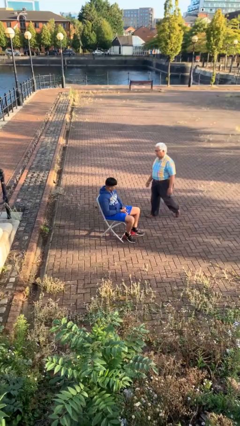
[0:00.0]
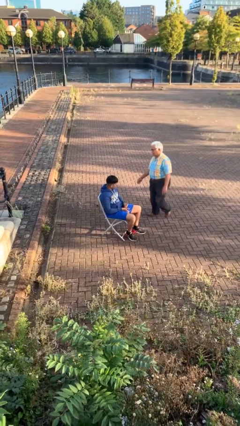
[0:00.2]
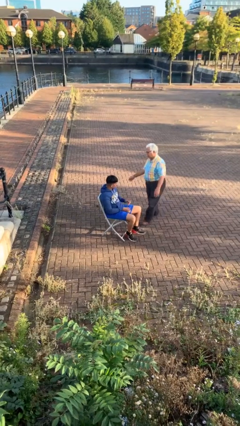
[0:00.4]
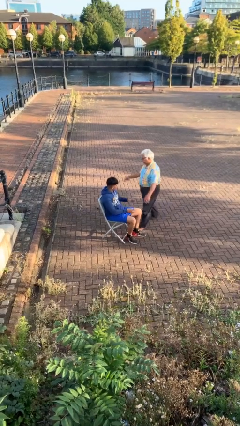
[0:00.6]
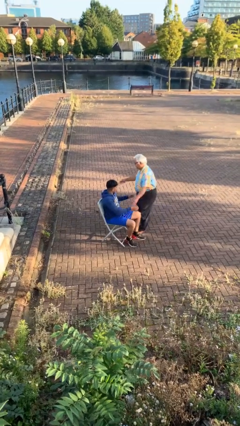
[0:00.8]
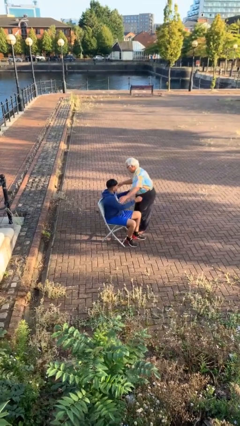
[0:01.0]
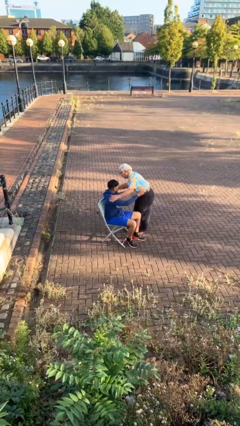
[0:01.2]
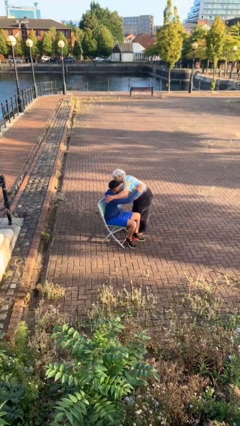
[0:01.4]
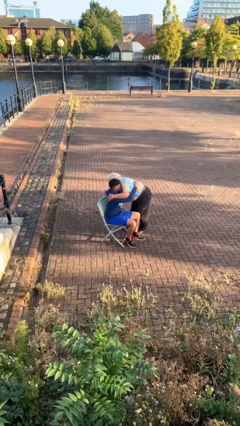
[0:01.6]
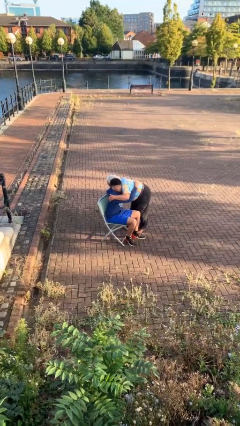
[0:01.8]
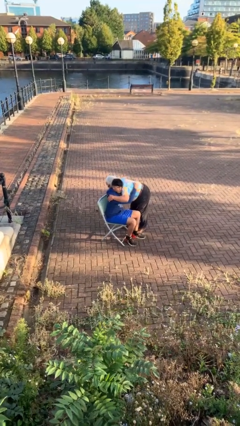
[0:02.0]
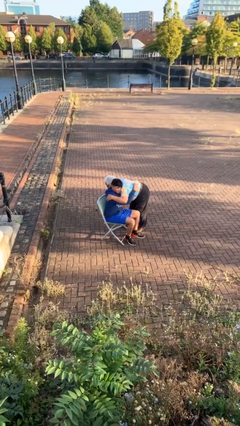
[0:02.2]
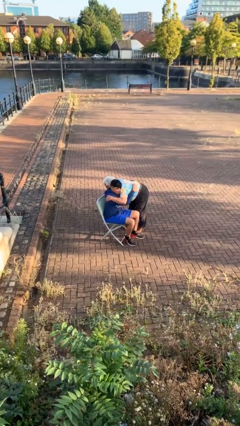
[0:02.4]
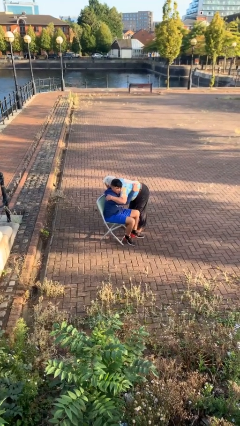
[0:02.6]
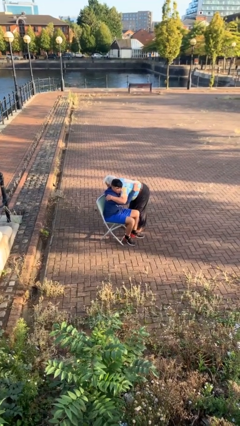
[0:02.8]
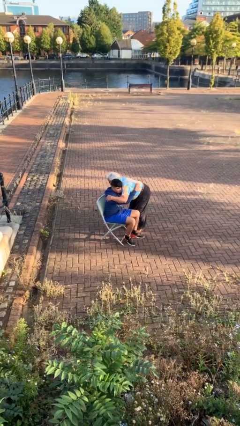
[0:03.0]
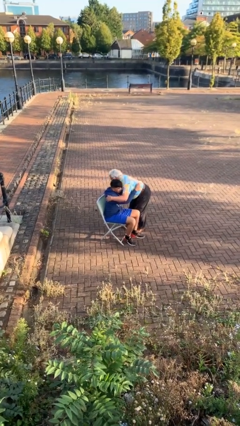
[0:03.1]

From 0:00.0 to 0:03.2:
person embraces person

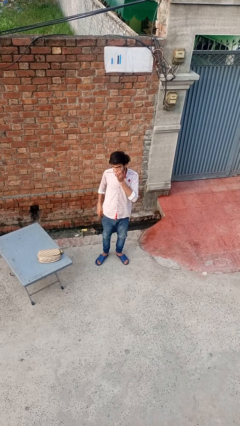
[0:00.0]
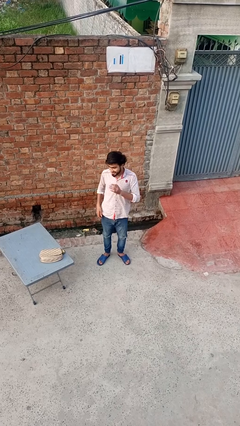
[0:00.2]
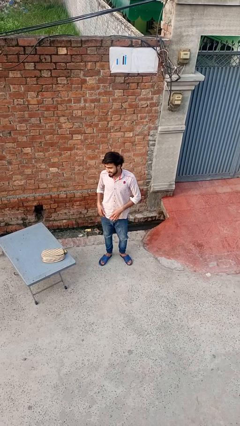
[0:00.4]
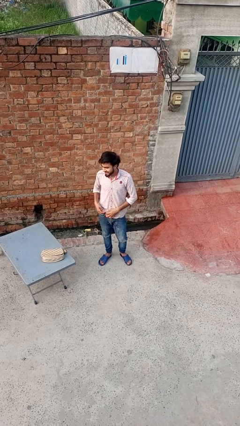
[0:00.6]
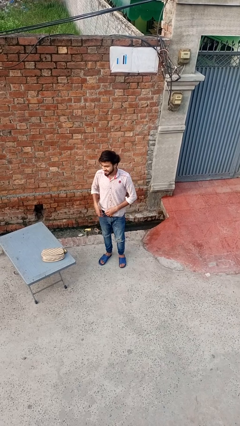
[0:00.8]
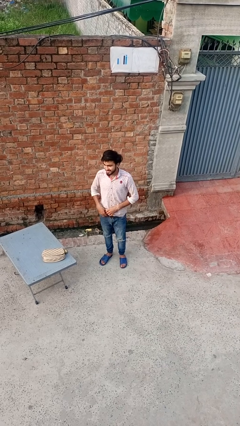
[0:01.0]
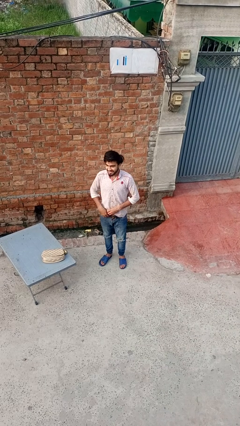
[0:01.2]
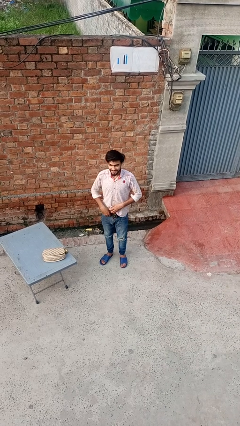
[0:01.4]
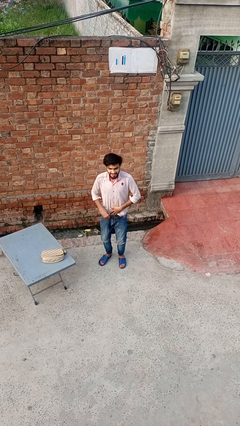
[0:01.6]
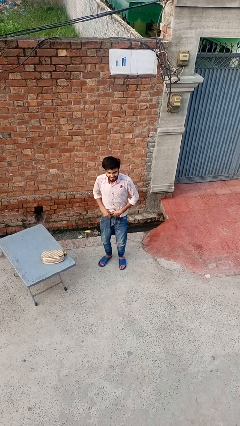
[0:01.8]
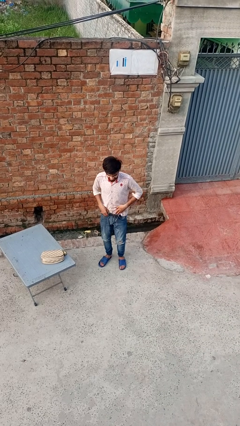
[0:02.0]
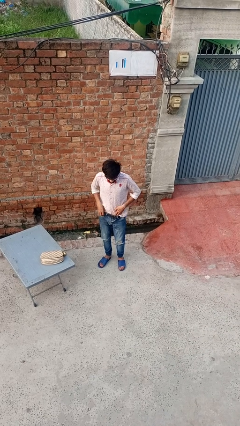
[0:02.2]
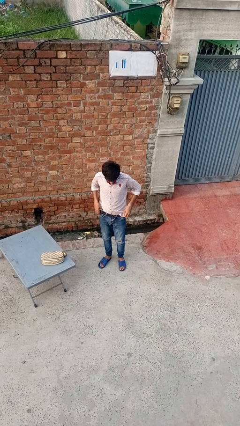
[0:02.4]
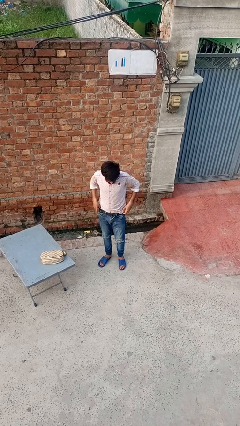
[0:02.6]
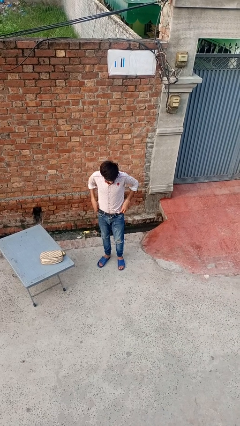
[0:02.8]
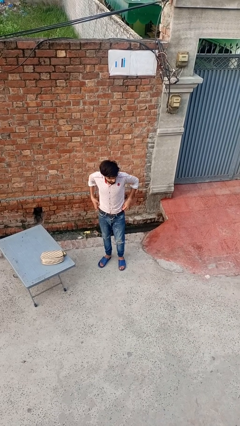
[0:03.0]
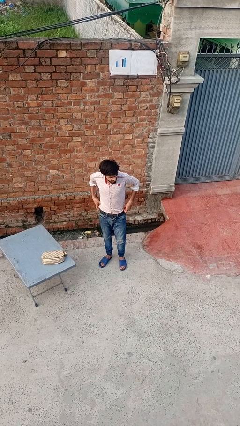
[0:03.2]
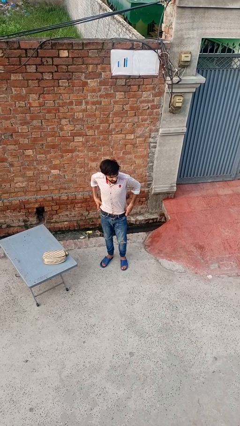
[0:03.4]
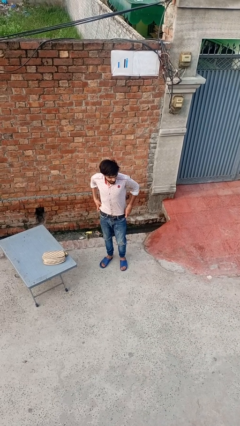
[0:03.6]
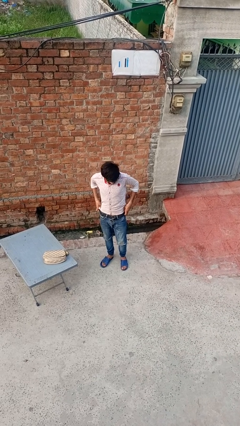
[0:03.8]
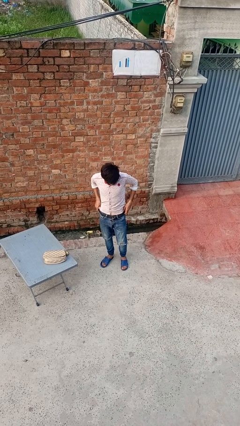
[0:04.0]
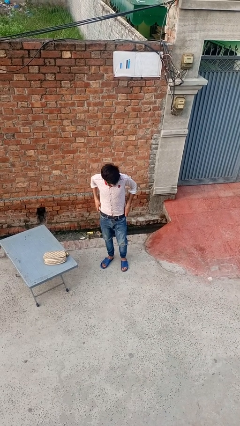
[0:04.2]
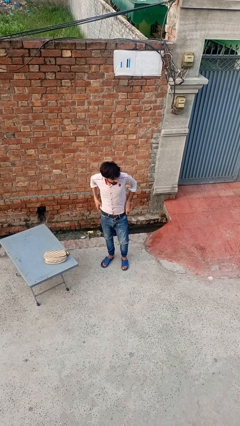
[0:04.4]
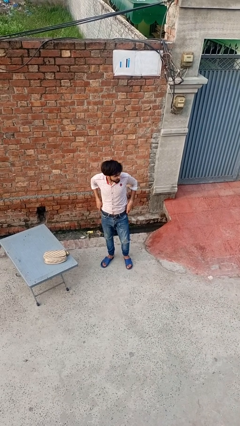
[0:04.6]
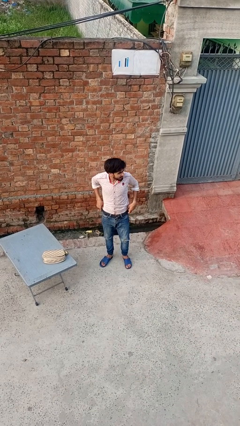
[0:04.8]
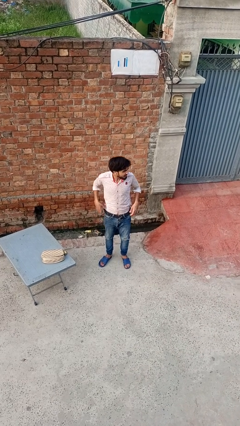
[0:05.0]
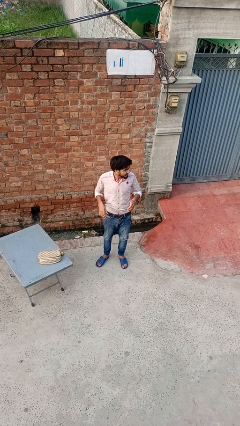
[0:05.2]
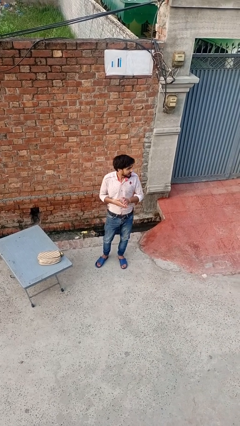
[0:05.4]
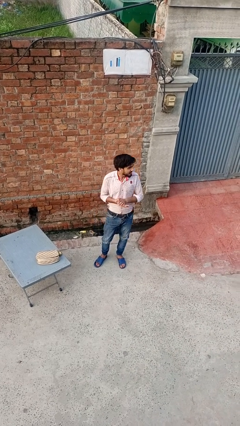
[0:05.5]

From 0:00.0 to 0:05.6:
person tucks in shirt

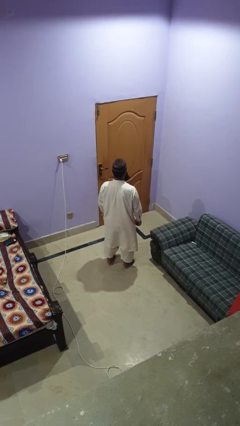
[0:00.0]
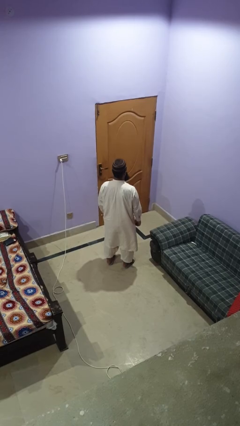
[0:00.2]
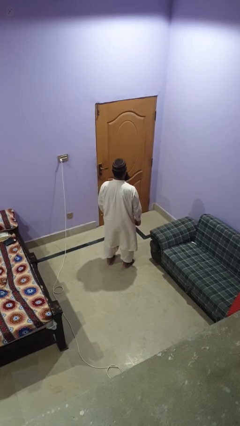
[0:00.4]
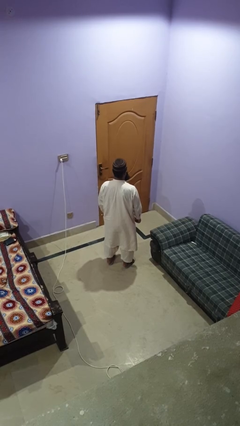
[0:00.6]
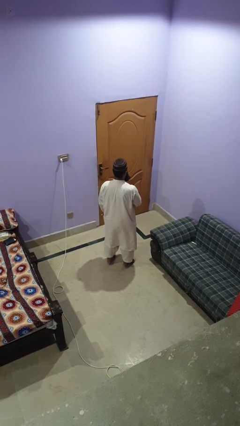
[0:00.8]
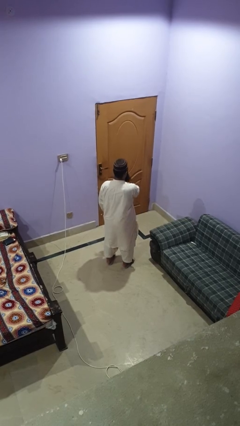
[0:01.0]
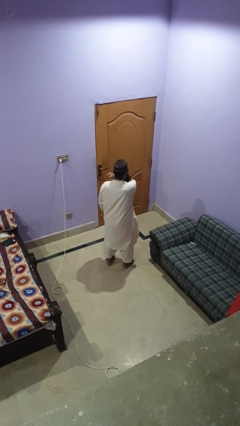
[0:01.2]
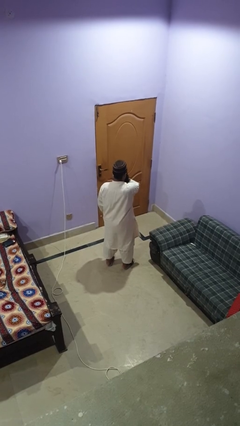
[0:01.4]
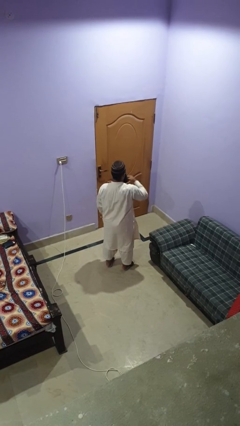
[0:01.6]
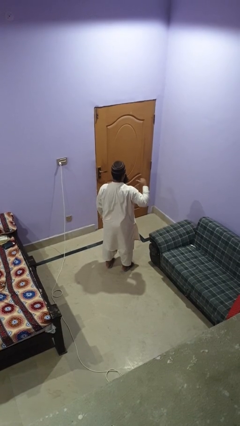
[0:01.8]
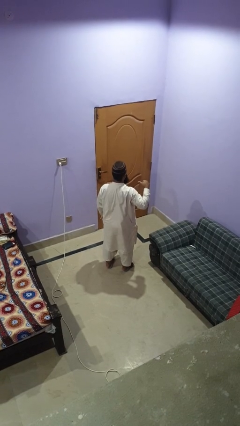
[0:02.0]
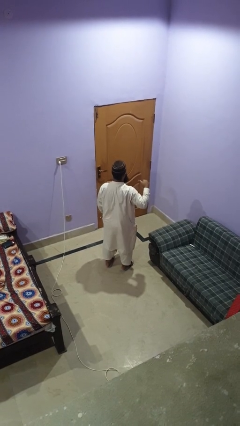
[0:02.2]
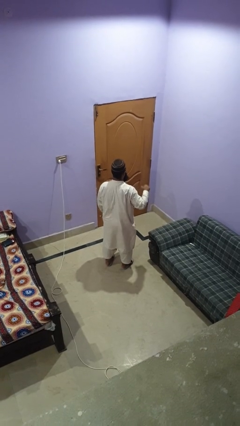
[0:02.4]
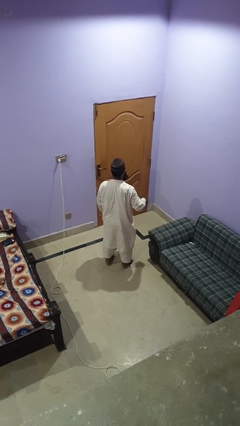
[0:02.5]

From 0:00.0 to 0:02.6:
person gestures cut

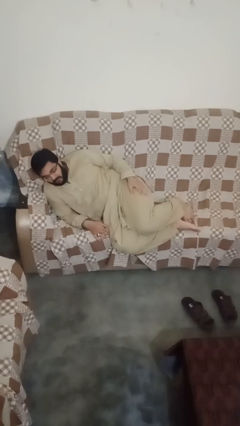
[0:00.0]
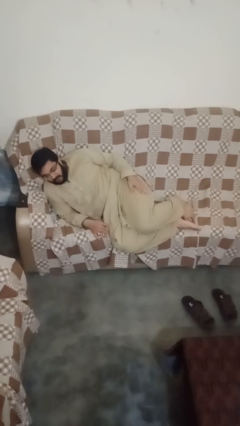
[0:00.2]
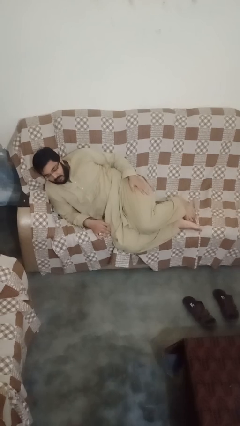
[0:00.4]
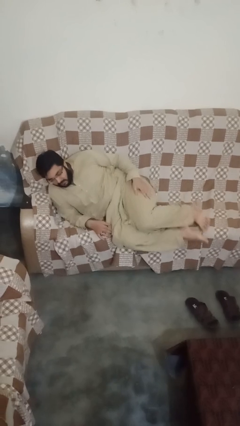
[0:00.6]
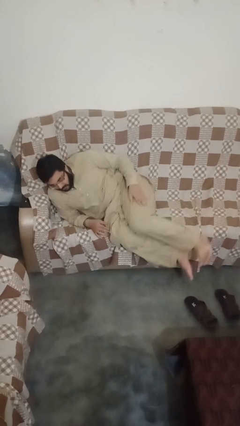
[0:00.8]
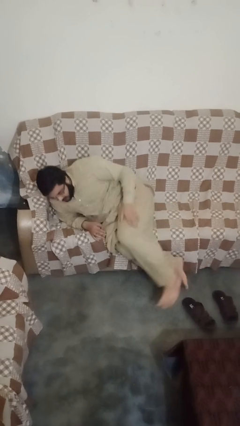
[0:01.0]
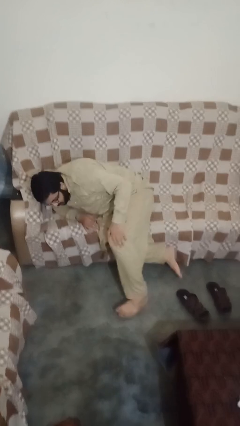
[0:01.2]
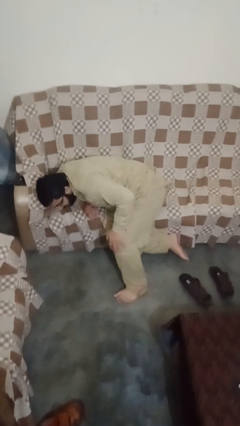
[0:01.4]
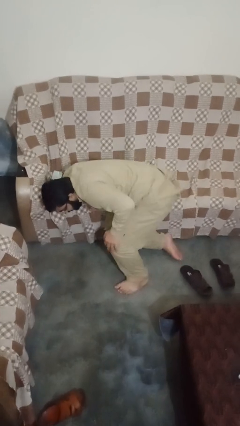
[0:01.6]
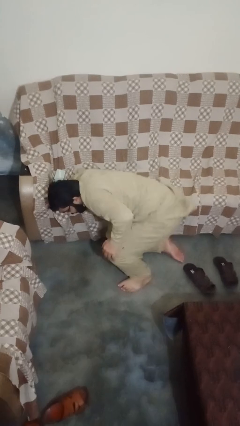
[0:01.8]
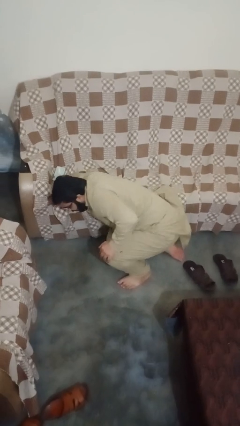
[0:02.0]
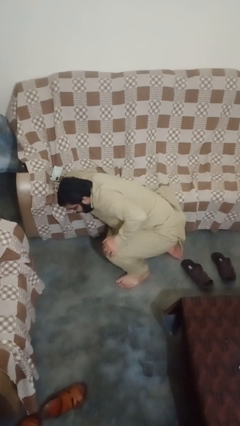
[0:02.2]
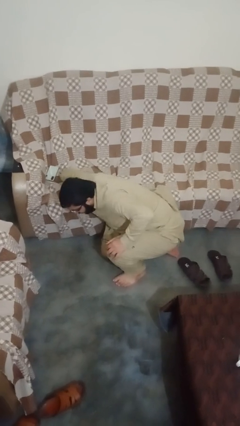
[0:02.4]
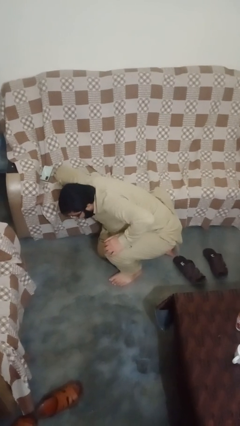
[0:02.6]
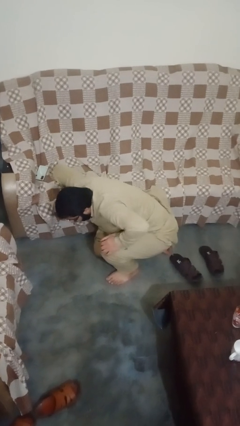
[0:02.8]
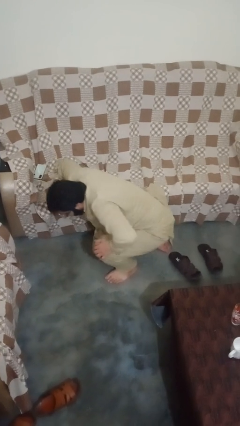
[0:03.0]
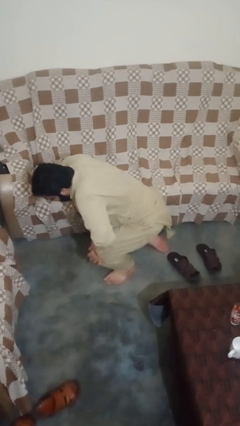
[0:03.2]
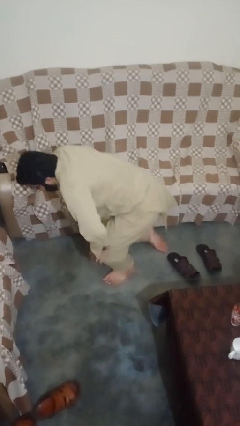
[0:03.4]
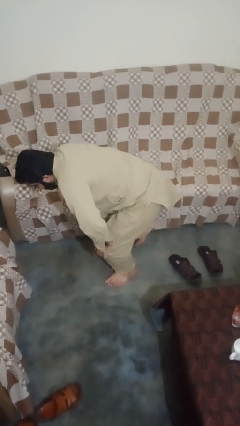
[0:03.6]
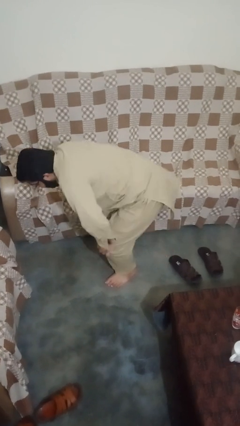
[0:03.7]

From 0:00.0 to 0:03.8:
person falls from bed

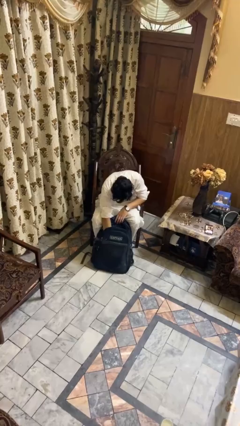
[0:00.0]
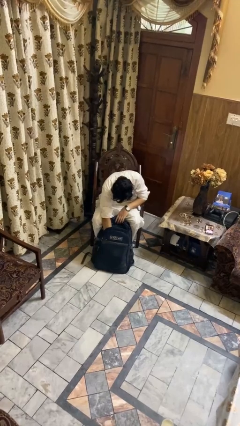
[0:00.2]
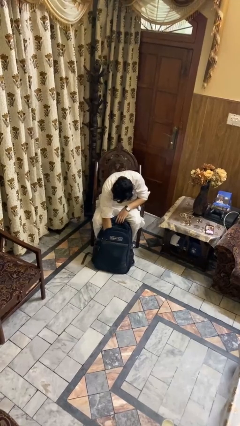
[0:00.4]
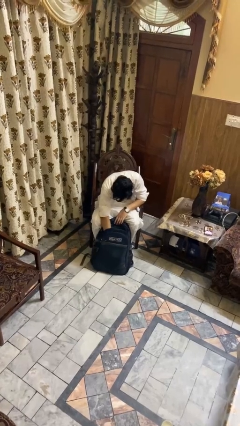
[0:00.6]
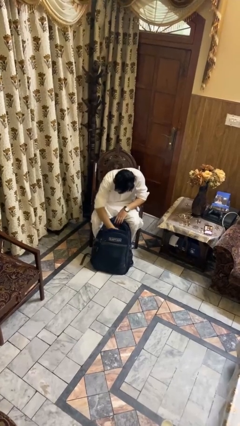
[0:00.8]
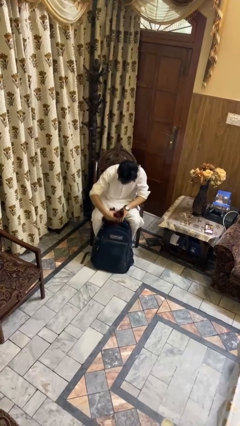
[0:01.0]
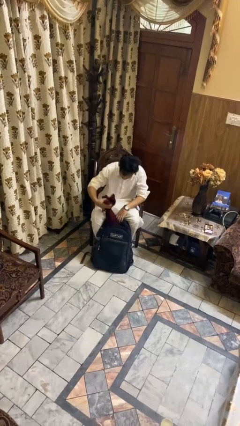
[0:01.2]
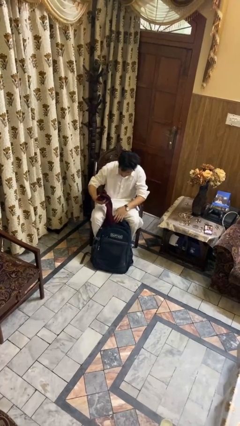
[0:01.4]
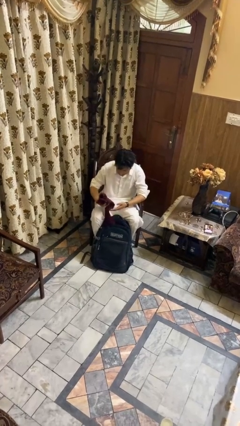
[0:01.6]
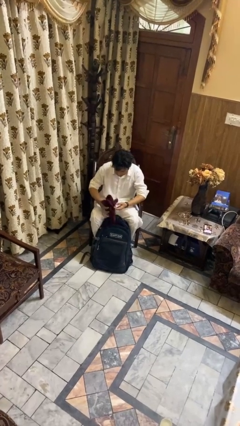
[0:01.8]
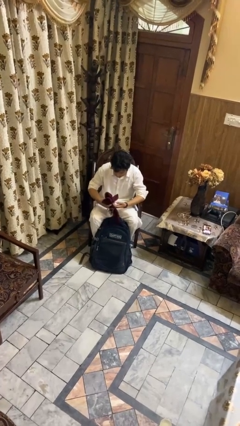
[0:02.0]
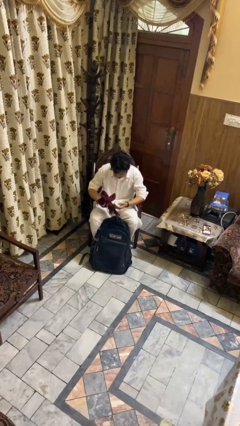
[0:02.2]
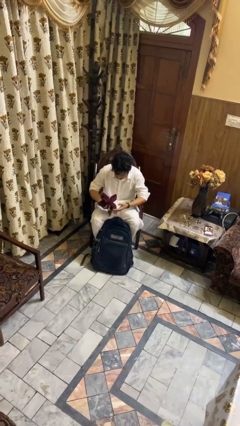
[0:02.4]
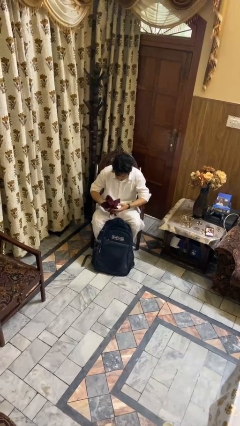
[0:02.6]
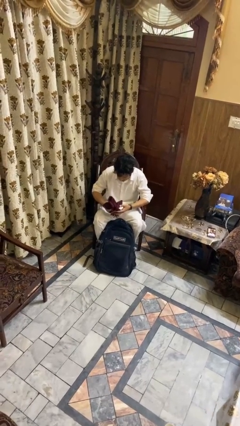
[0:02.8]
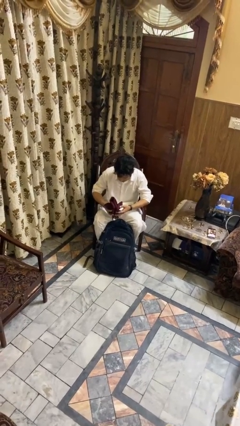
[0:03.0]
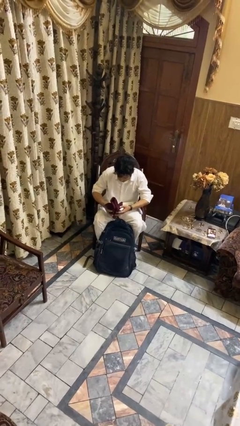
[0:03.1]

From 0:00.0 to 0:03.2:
person takes object from backpack
